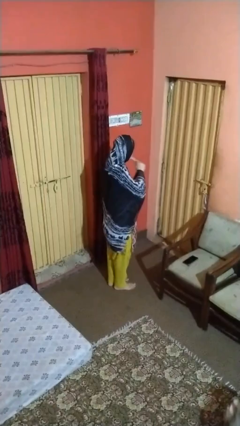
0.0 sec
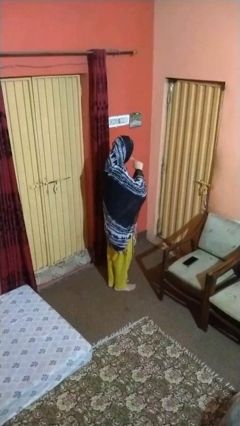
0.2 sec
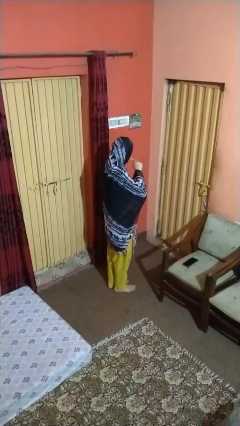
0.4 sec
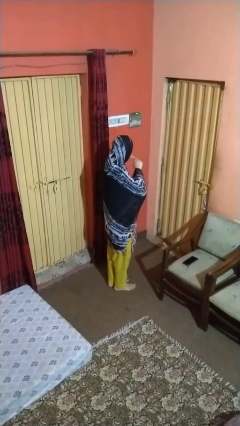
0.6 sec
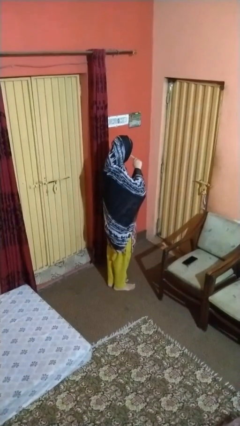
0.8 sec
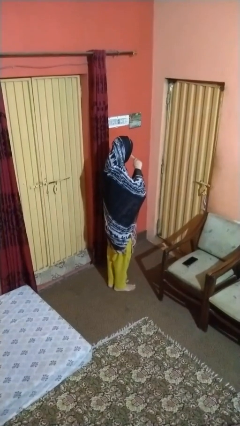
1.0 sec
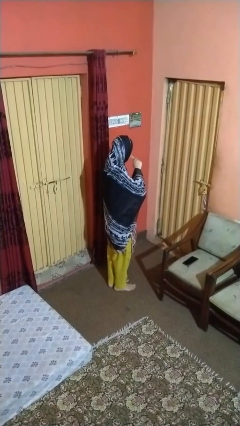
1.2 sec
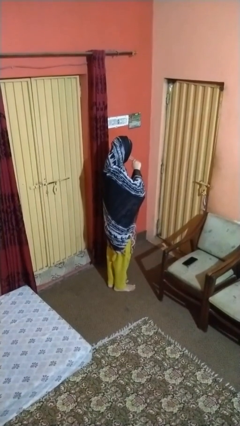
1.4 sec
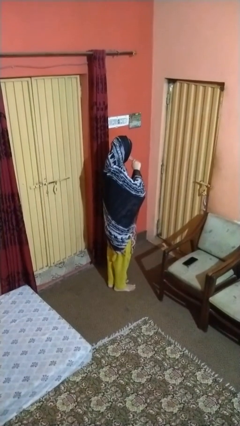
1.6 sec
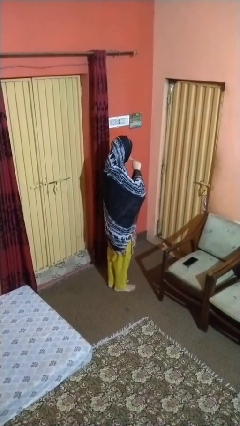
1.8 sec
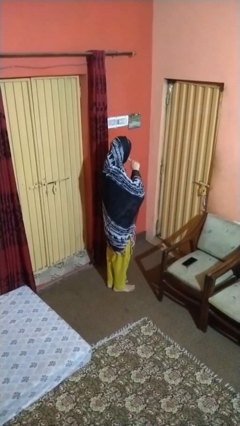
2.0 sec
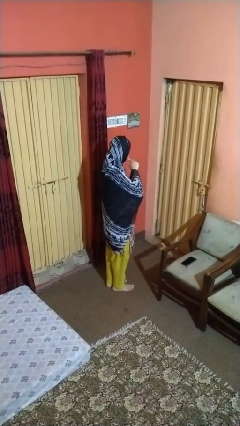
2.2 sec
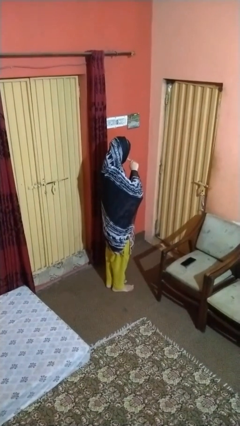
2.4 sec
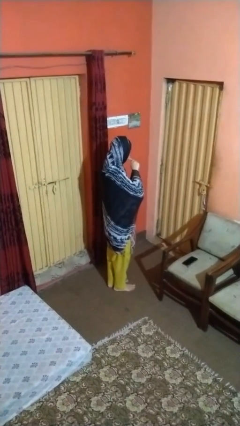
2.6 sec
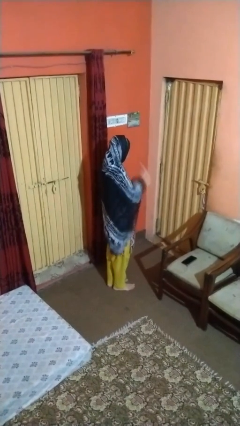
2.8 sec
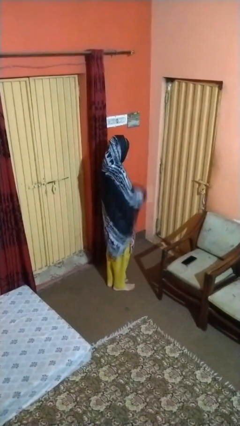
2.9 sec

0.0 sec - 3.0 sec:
person brushes teeth

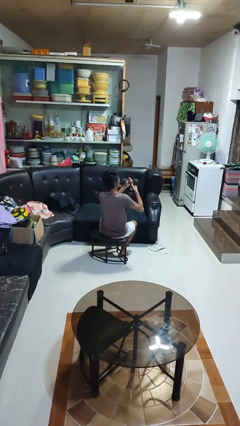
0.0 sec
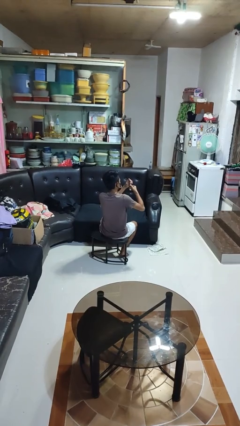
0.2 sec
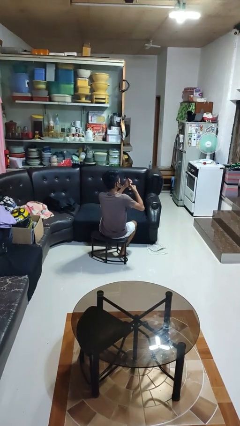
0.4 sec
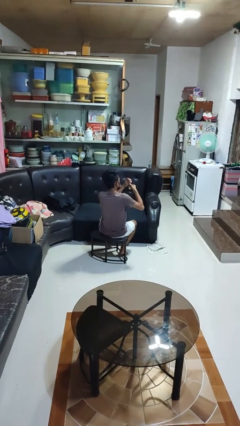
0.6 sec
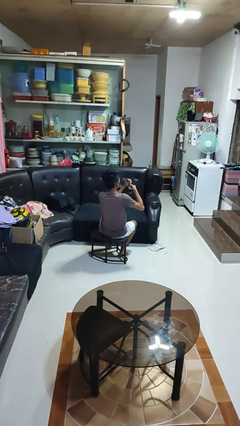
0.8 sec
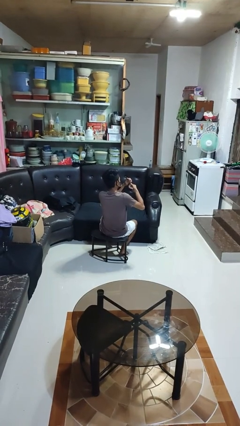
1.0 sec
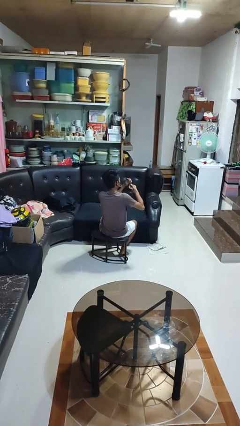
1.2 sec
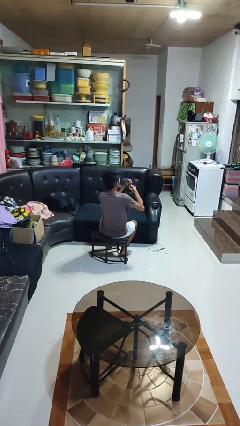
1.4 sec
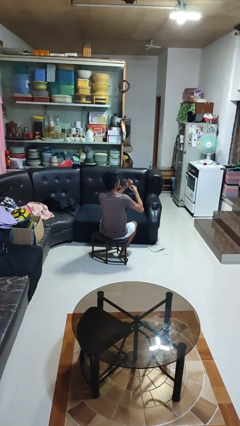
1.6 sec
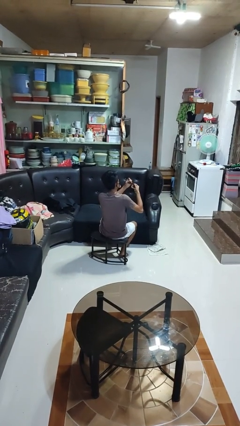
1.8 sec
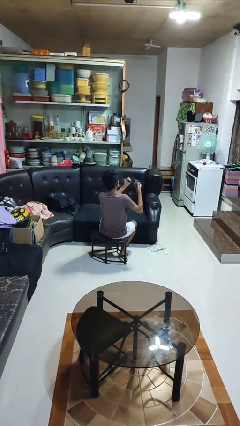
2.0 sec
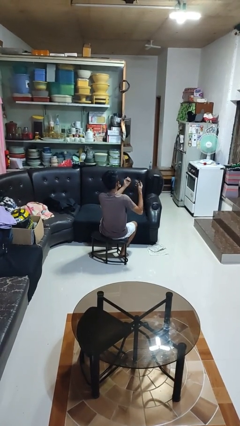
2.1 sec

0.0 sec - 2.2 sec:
person clips fingernails

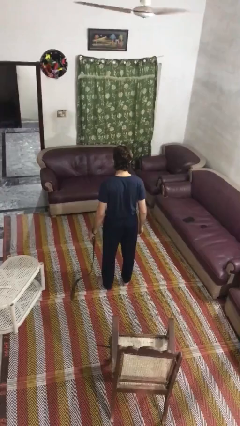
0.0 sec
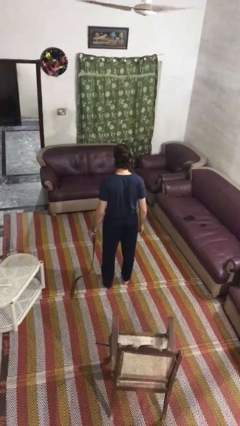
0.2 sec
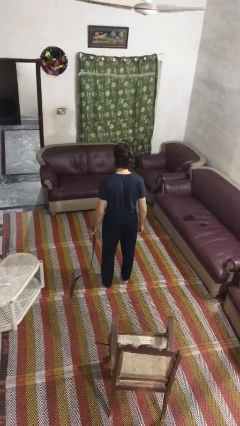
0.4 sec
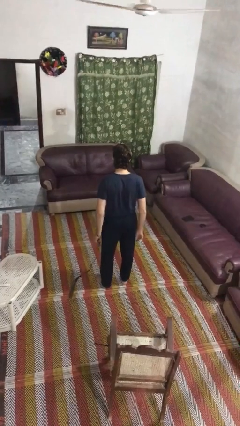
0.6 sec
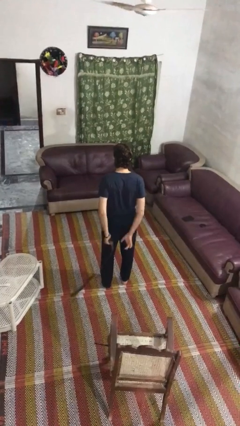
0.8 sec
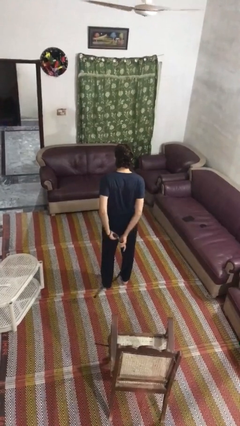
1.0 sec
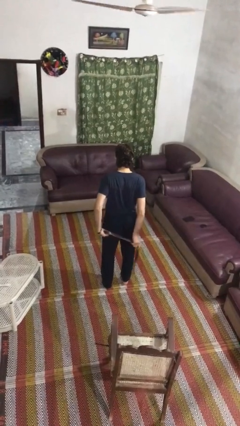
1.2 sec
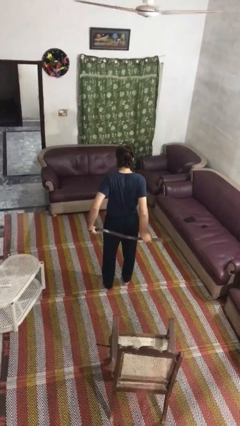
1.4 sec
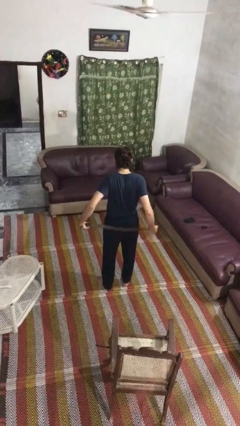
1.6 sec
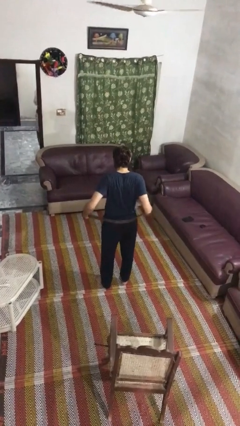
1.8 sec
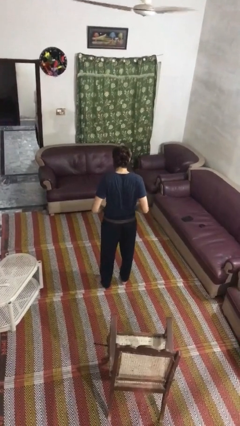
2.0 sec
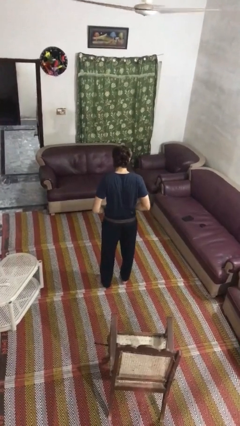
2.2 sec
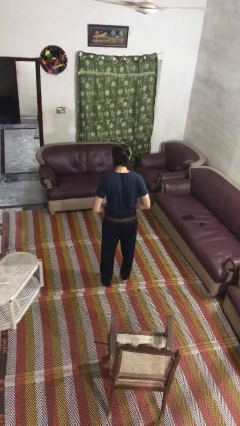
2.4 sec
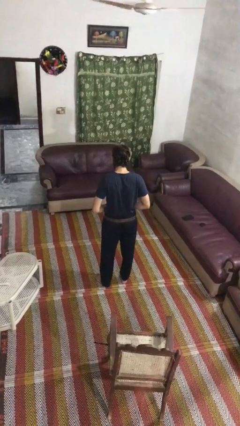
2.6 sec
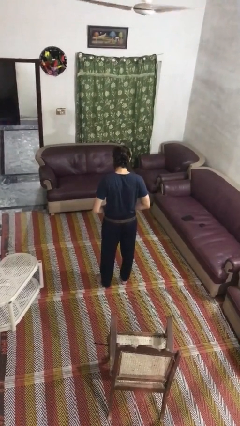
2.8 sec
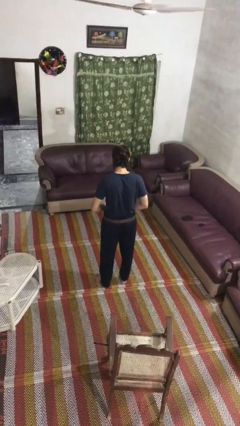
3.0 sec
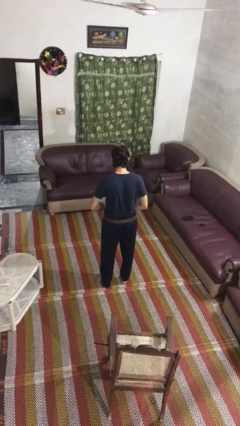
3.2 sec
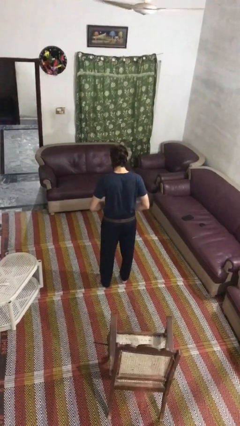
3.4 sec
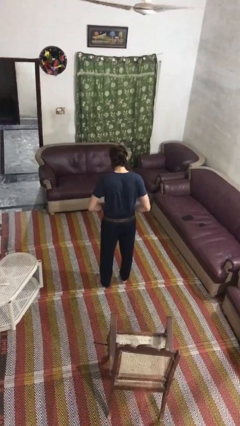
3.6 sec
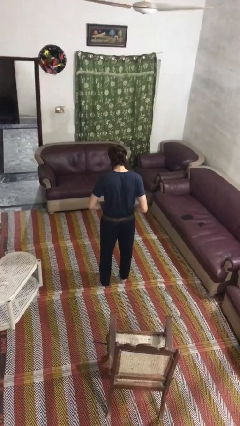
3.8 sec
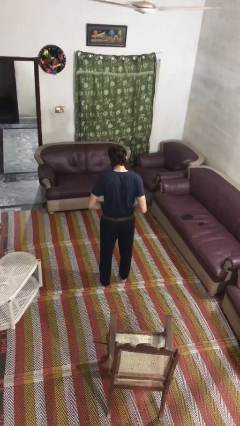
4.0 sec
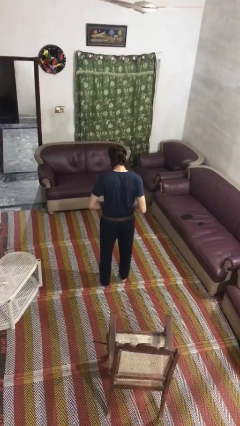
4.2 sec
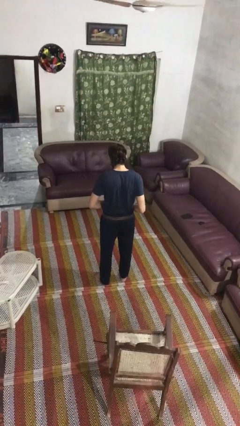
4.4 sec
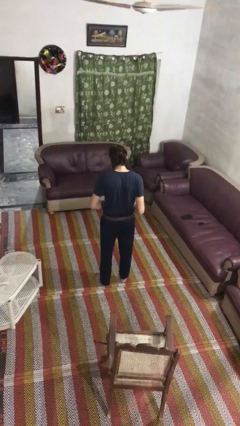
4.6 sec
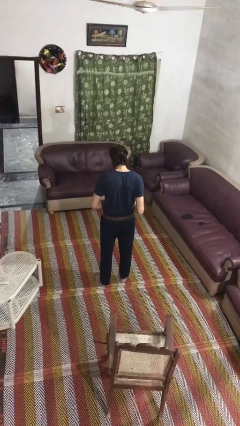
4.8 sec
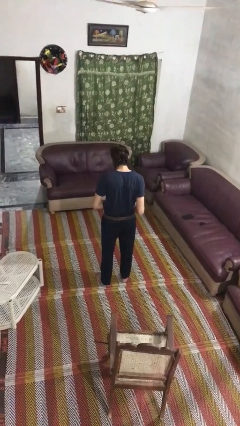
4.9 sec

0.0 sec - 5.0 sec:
person puts on belt

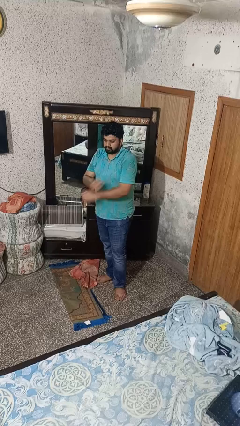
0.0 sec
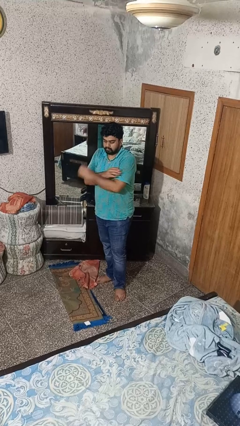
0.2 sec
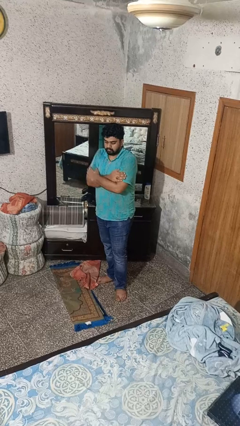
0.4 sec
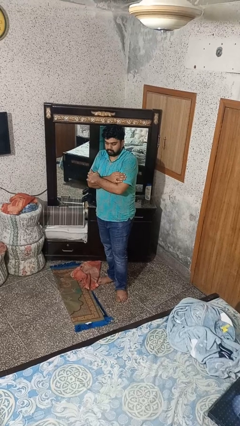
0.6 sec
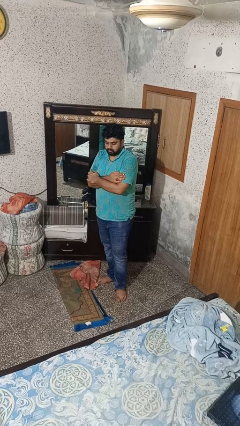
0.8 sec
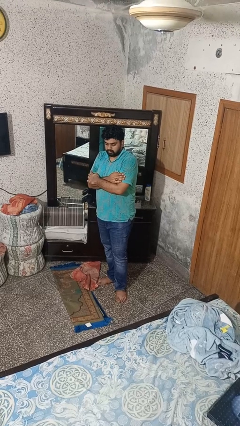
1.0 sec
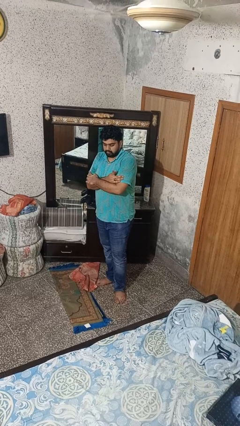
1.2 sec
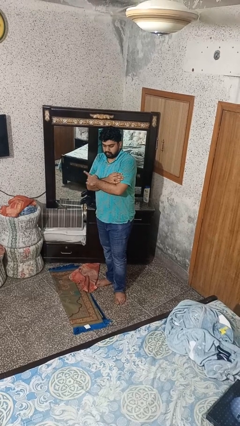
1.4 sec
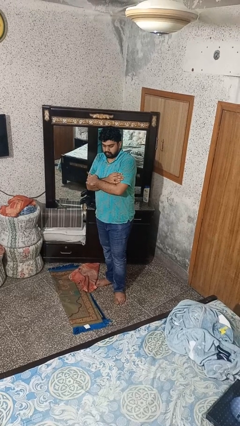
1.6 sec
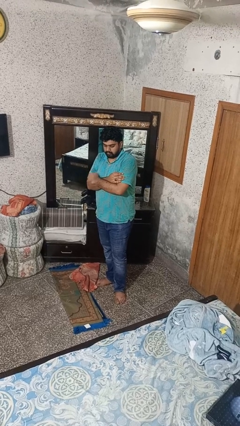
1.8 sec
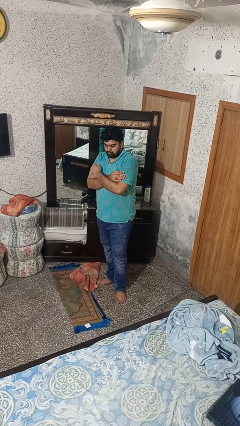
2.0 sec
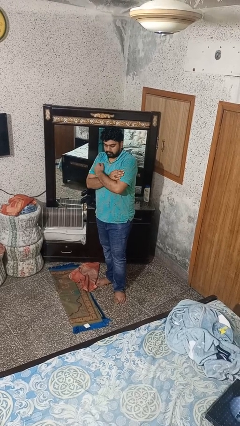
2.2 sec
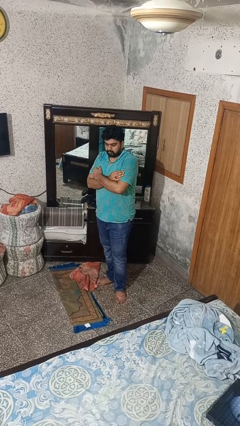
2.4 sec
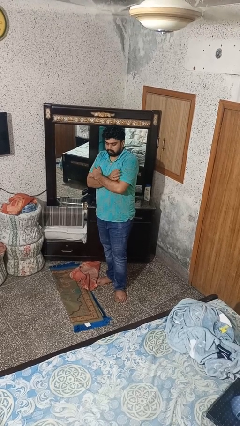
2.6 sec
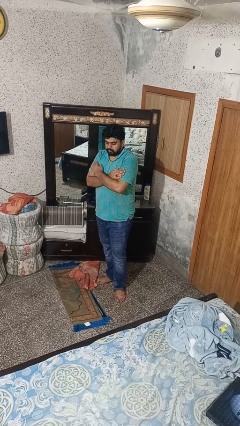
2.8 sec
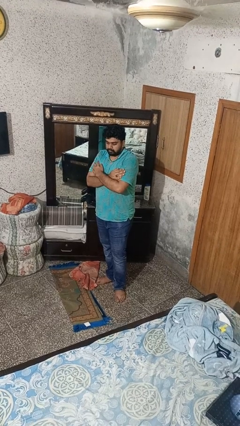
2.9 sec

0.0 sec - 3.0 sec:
person crosses arms

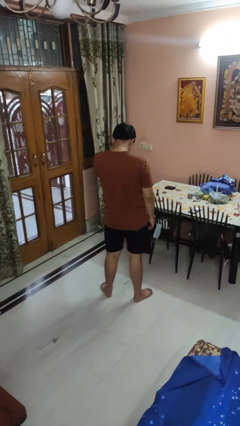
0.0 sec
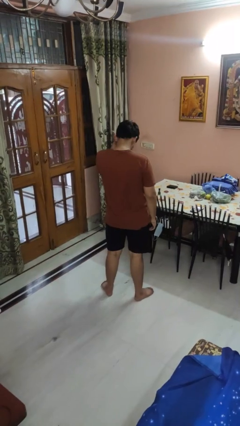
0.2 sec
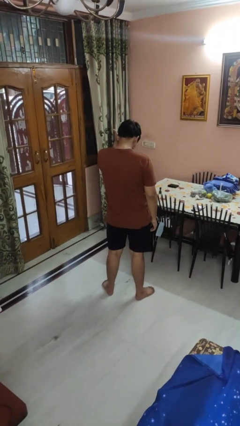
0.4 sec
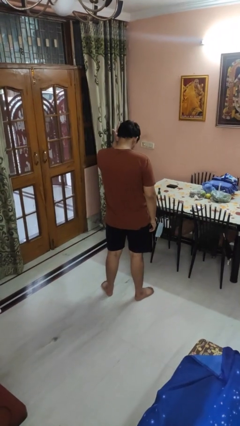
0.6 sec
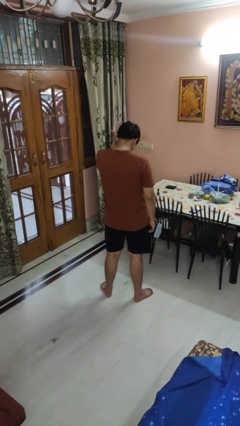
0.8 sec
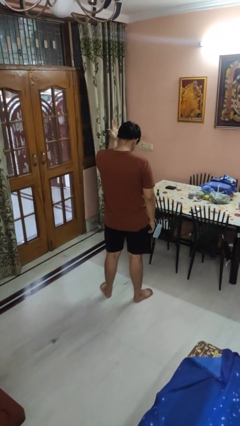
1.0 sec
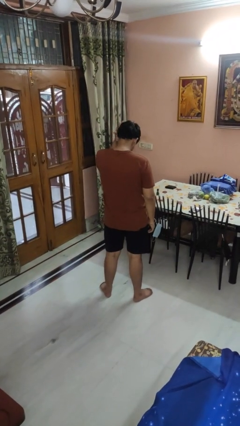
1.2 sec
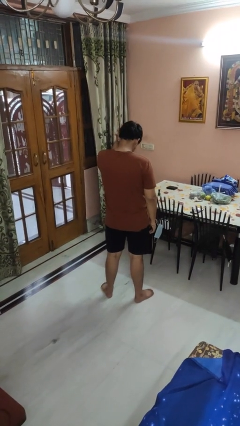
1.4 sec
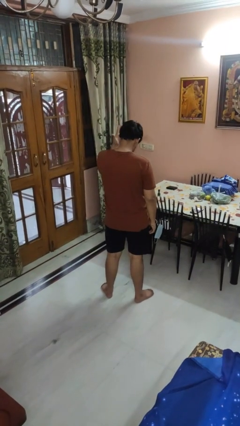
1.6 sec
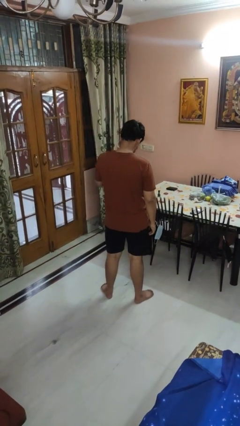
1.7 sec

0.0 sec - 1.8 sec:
person pats head

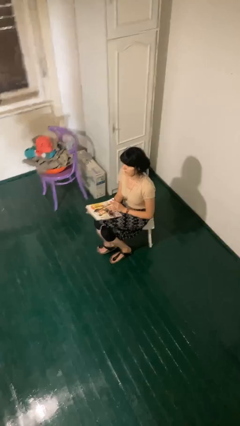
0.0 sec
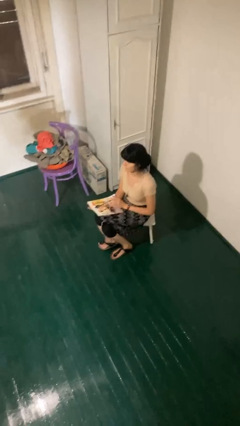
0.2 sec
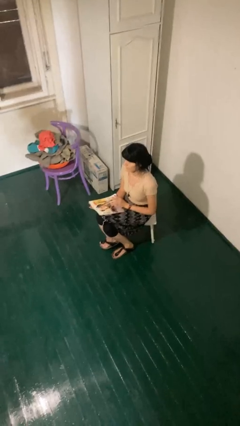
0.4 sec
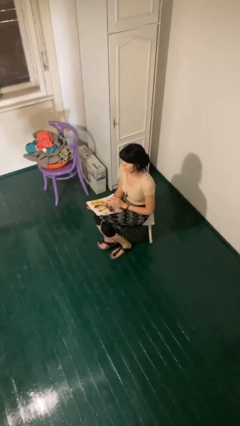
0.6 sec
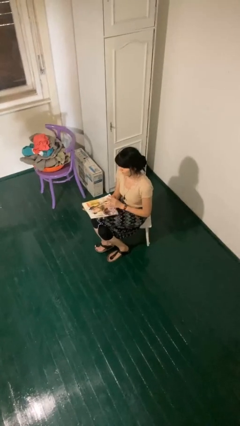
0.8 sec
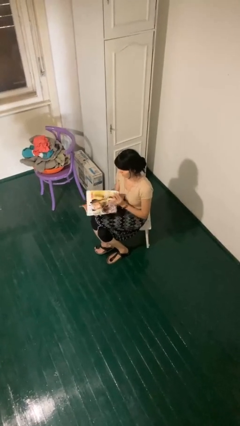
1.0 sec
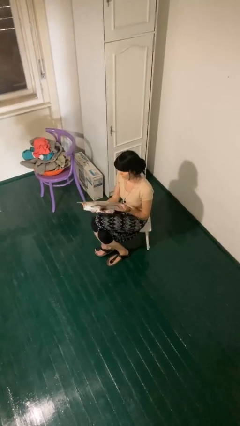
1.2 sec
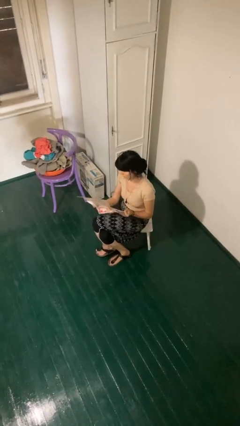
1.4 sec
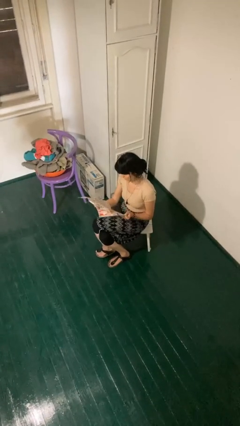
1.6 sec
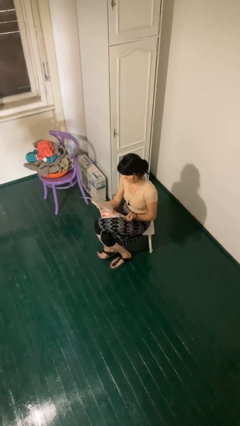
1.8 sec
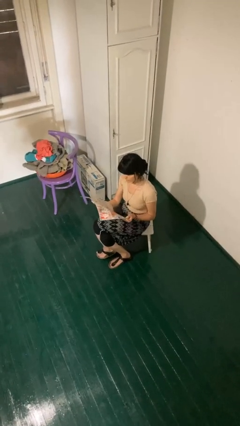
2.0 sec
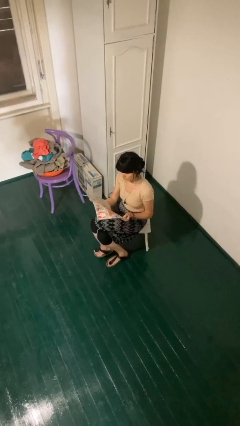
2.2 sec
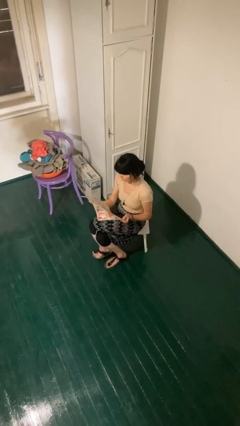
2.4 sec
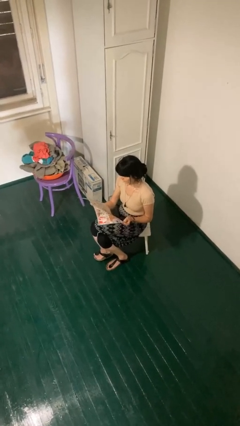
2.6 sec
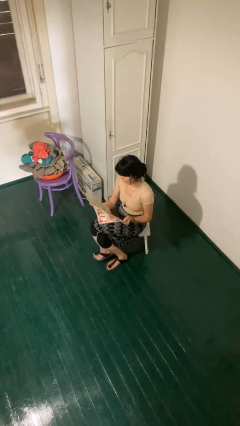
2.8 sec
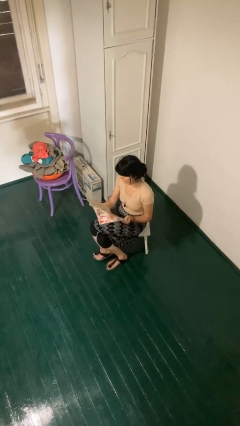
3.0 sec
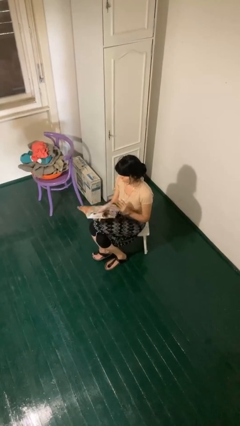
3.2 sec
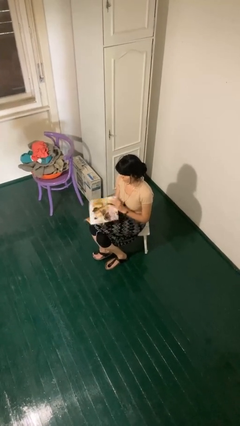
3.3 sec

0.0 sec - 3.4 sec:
person reads magazine
